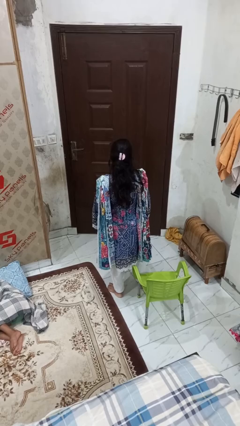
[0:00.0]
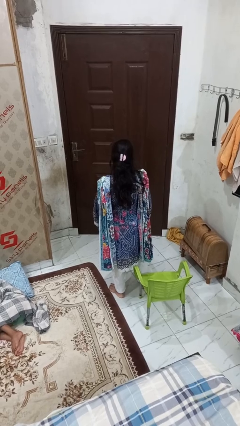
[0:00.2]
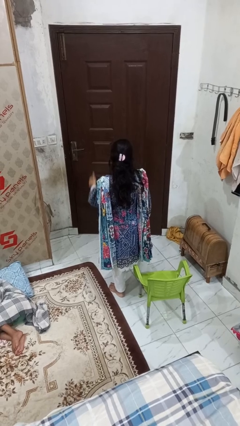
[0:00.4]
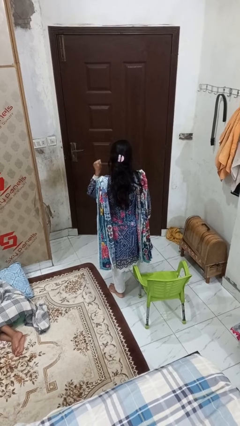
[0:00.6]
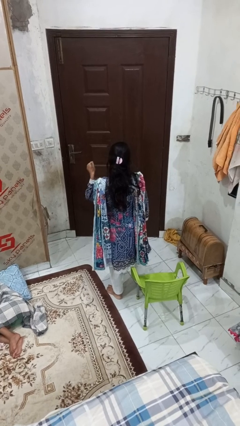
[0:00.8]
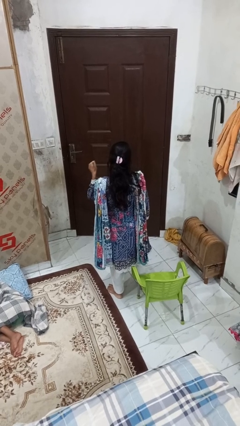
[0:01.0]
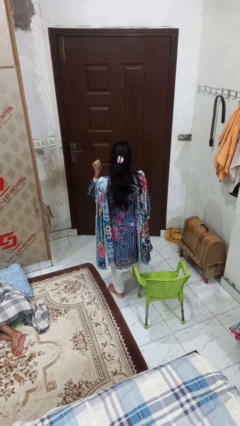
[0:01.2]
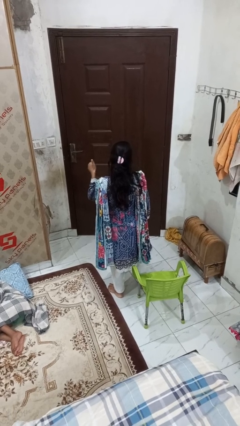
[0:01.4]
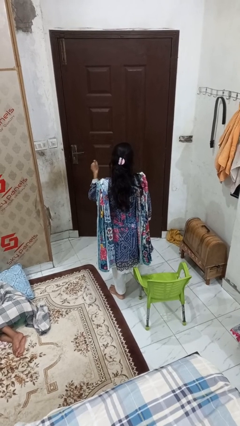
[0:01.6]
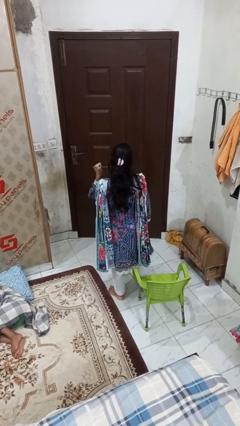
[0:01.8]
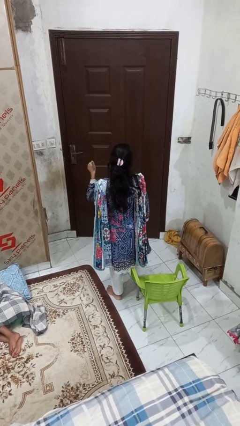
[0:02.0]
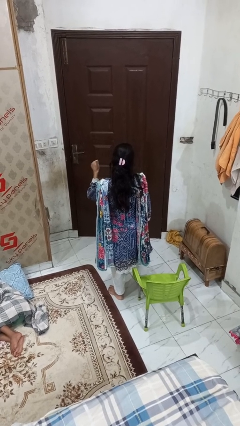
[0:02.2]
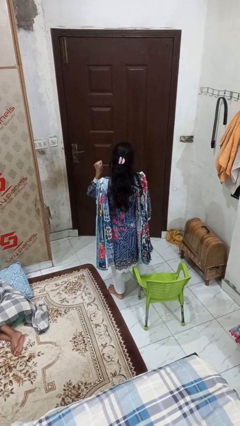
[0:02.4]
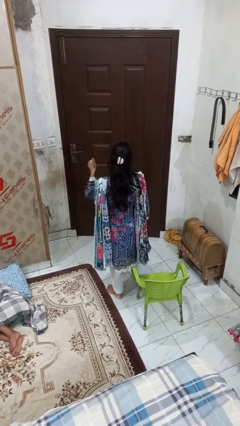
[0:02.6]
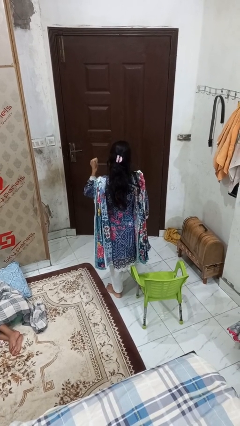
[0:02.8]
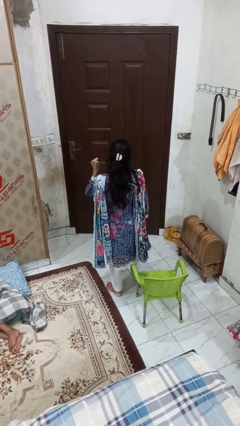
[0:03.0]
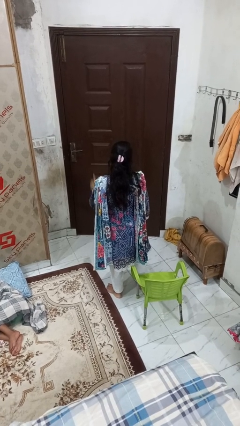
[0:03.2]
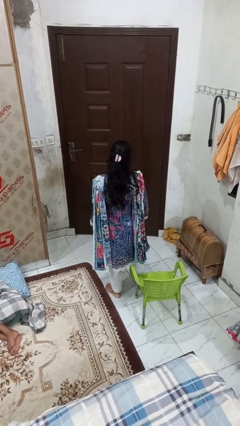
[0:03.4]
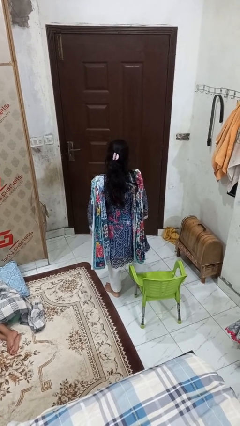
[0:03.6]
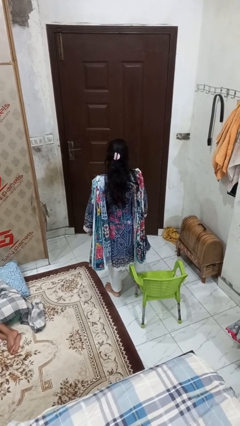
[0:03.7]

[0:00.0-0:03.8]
person gestures behind me

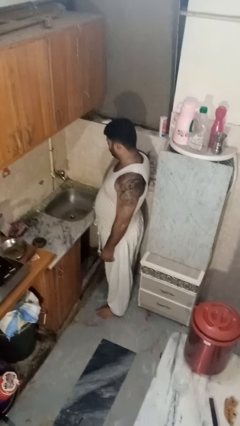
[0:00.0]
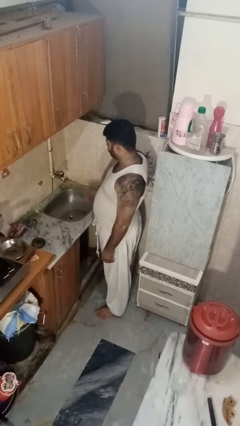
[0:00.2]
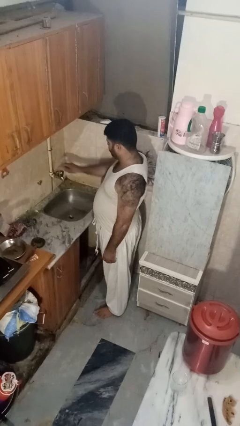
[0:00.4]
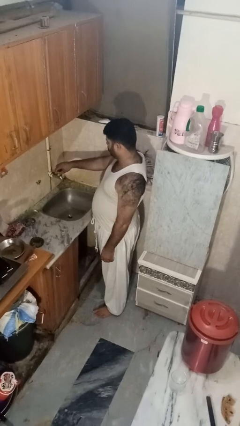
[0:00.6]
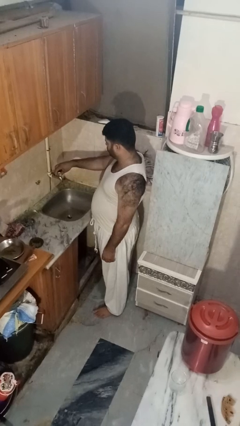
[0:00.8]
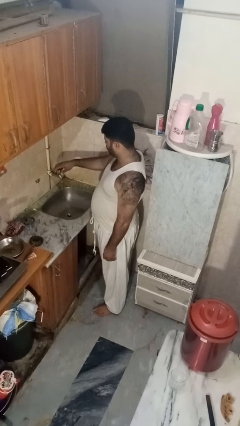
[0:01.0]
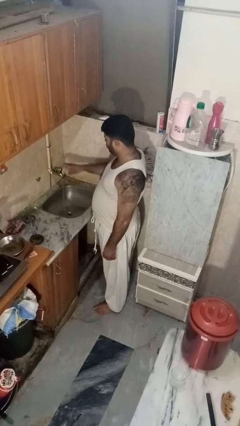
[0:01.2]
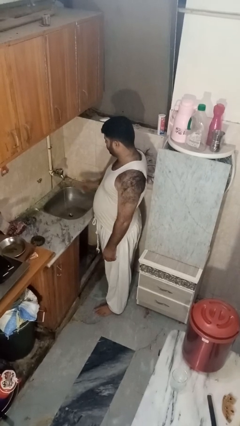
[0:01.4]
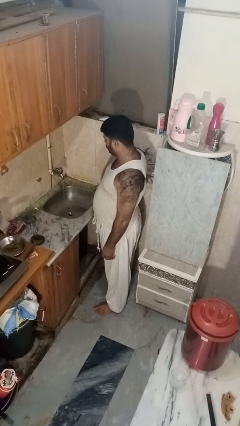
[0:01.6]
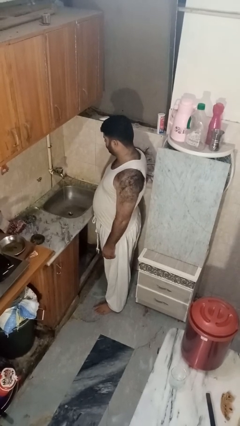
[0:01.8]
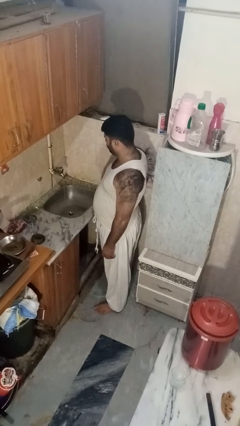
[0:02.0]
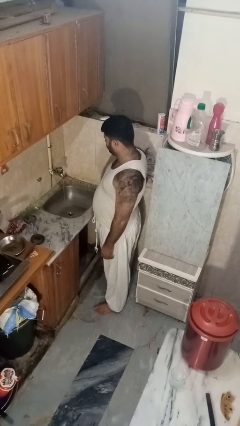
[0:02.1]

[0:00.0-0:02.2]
person turns on faucet

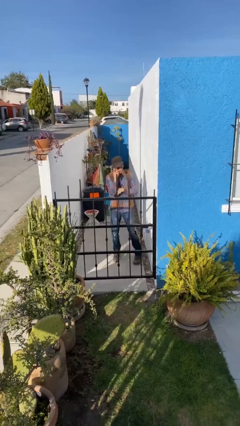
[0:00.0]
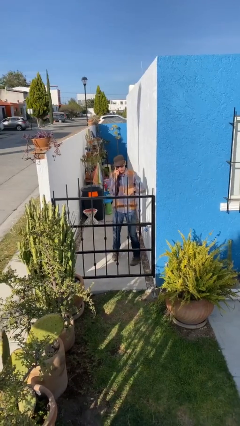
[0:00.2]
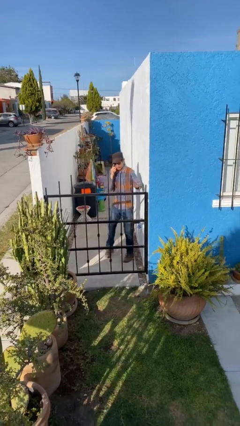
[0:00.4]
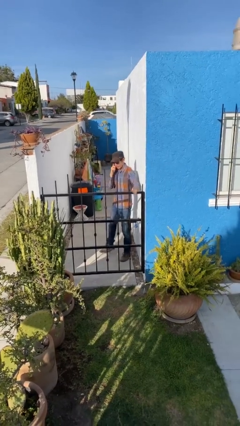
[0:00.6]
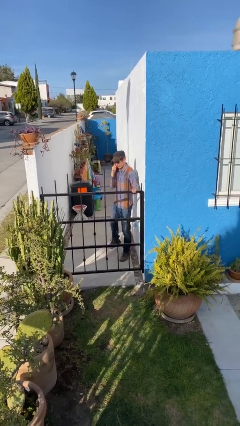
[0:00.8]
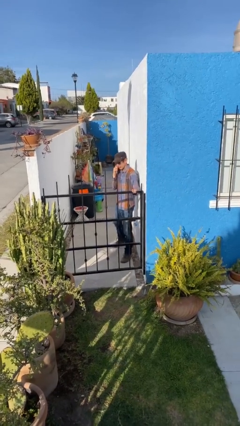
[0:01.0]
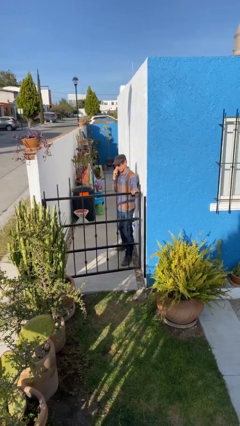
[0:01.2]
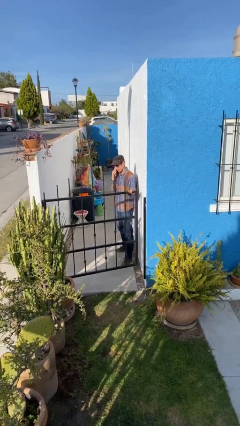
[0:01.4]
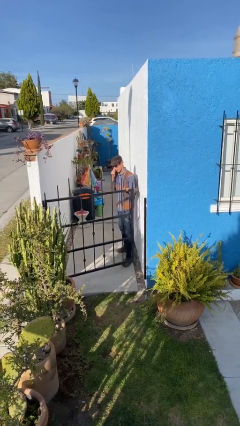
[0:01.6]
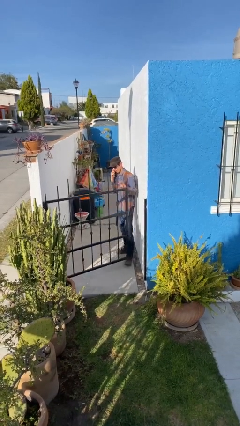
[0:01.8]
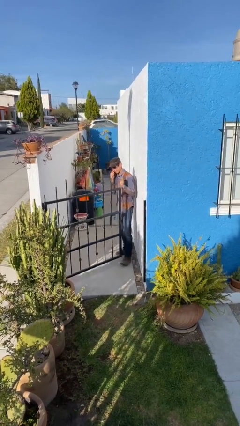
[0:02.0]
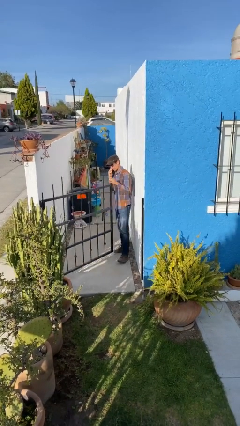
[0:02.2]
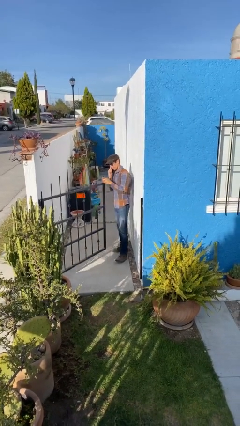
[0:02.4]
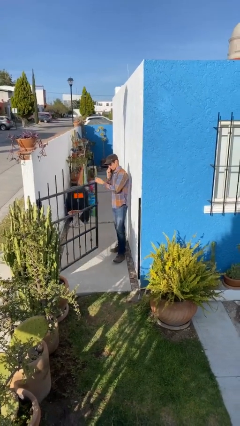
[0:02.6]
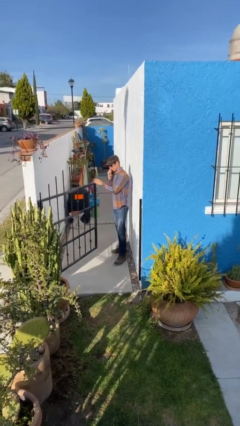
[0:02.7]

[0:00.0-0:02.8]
person opens facility door

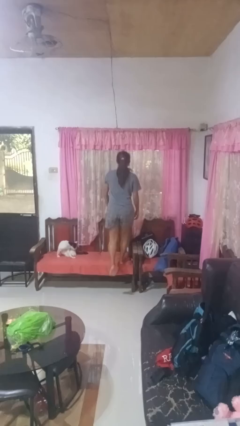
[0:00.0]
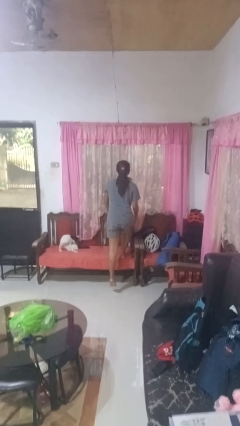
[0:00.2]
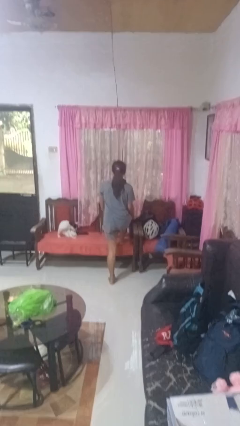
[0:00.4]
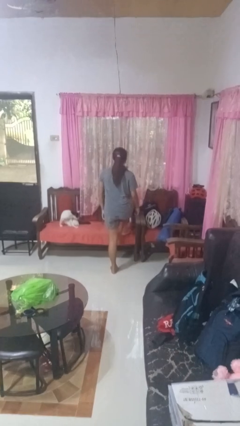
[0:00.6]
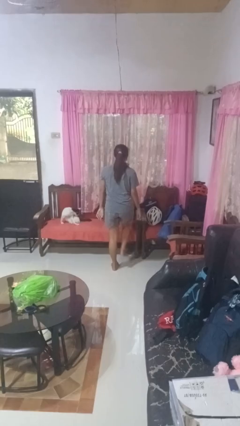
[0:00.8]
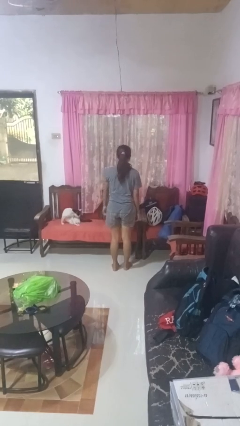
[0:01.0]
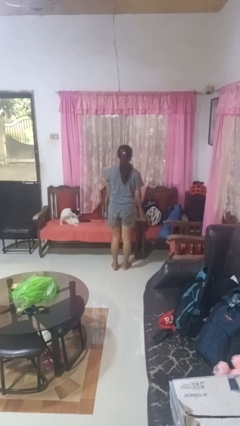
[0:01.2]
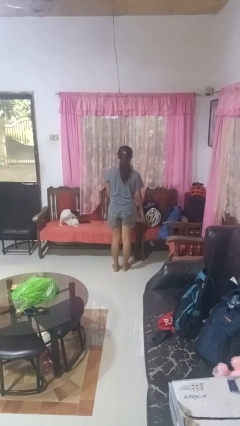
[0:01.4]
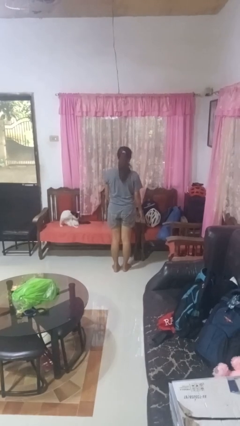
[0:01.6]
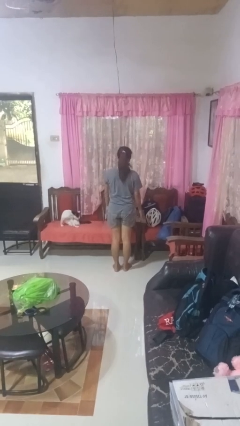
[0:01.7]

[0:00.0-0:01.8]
person climbs off chair

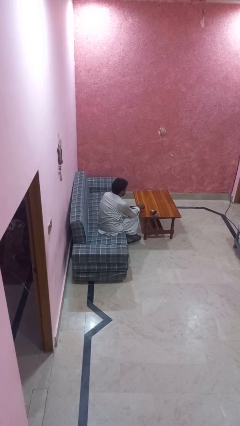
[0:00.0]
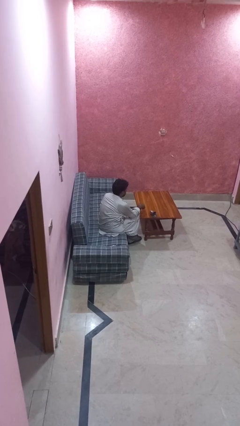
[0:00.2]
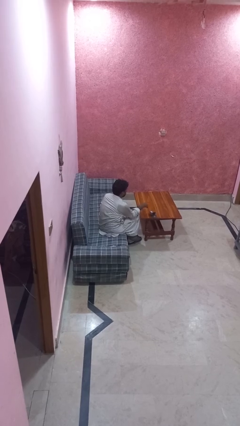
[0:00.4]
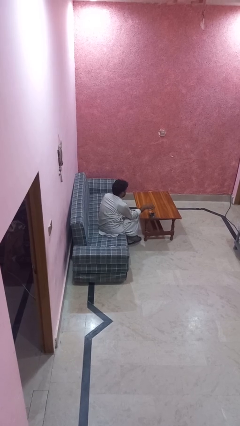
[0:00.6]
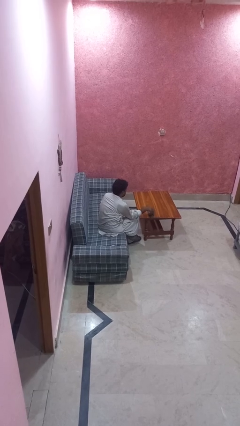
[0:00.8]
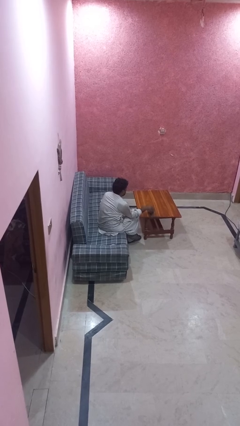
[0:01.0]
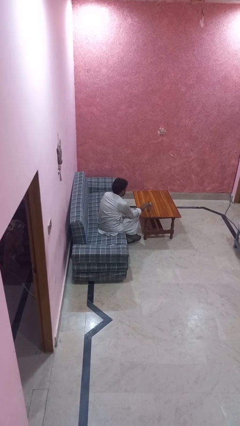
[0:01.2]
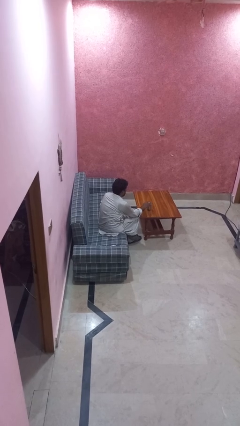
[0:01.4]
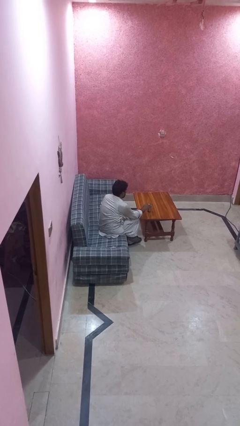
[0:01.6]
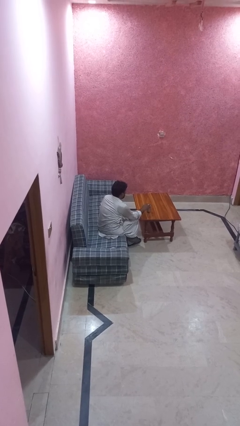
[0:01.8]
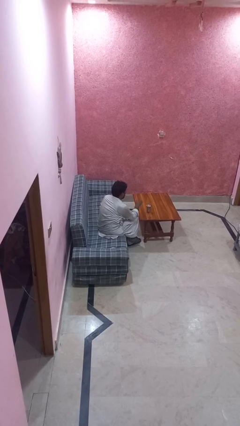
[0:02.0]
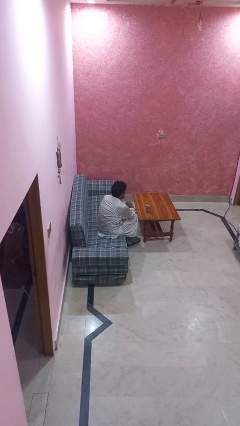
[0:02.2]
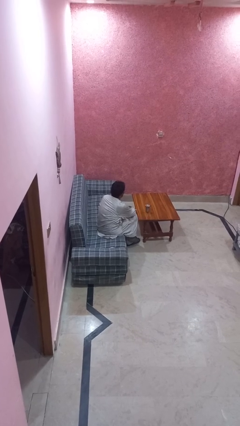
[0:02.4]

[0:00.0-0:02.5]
person sets upright glass

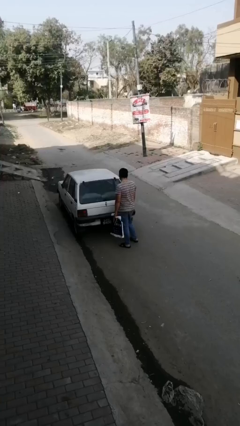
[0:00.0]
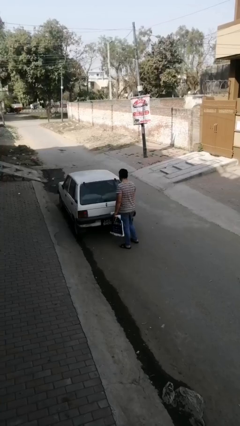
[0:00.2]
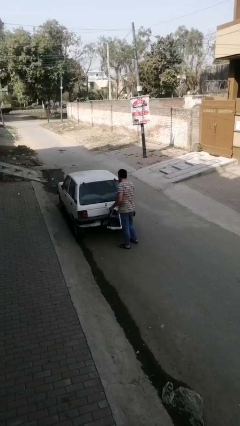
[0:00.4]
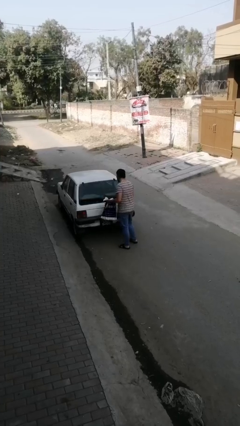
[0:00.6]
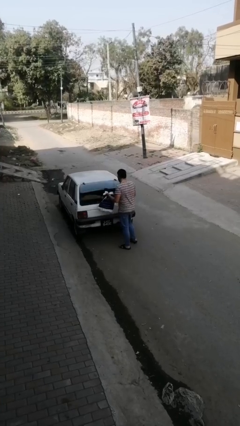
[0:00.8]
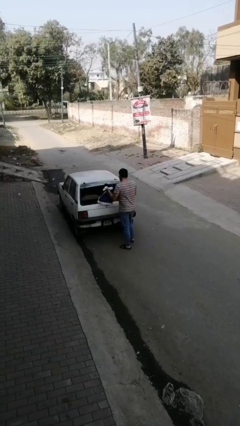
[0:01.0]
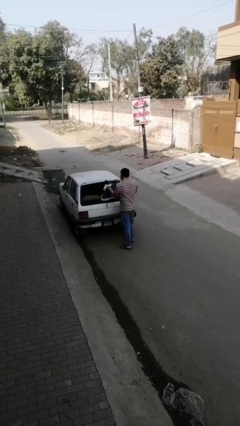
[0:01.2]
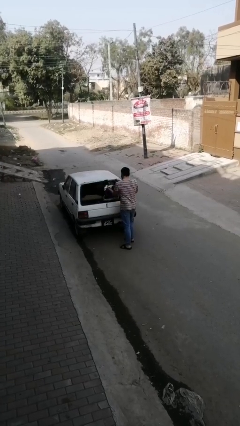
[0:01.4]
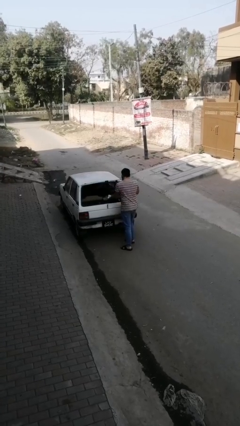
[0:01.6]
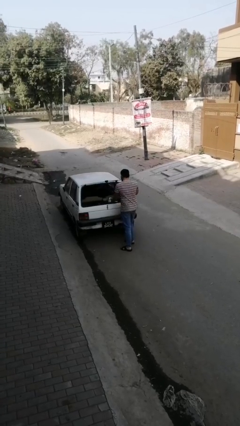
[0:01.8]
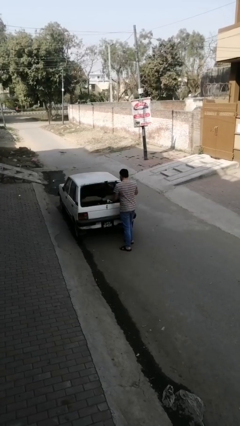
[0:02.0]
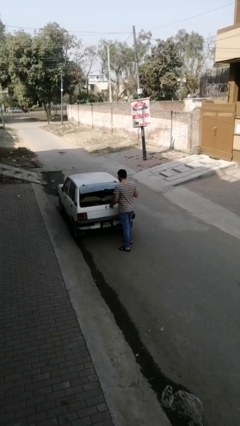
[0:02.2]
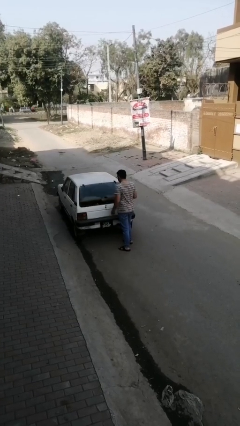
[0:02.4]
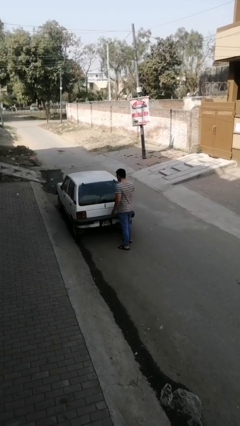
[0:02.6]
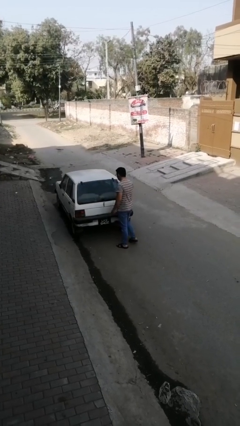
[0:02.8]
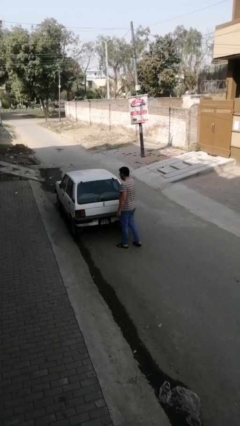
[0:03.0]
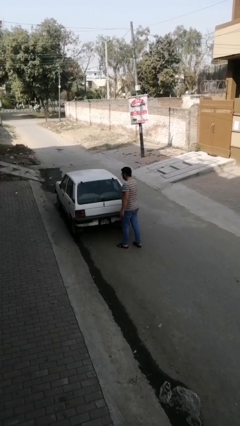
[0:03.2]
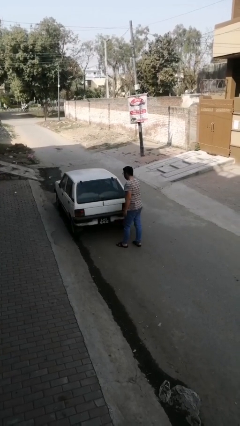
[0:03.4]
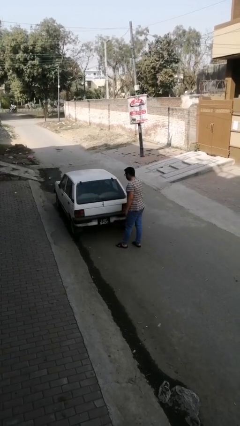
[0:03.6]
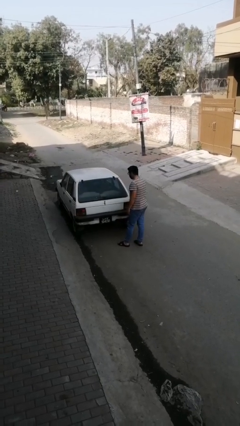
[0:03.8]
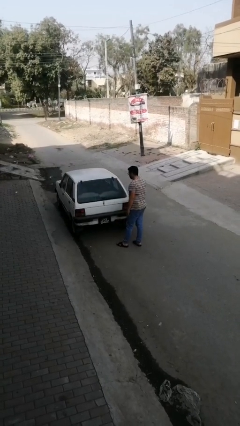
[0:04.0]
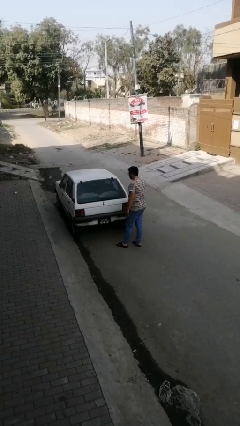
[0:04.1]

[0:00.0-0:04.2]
person loads car
